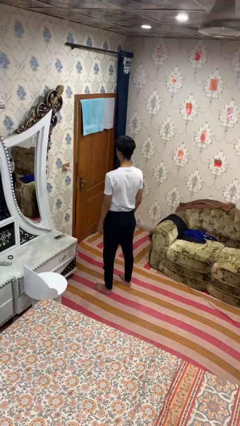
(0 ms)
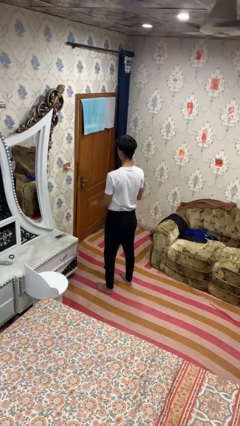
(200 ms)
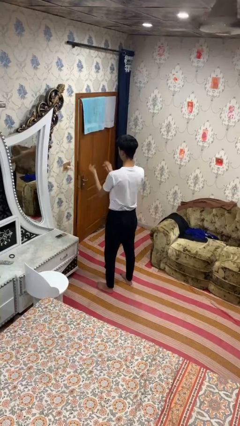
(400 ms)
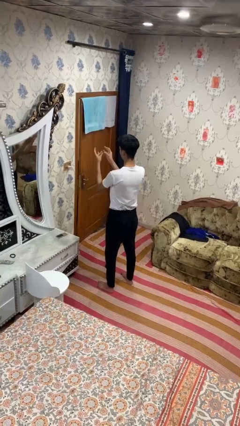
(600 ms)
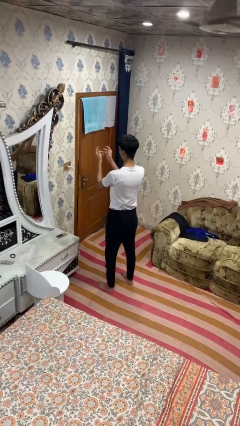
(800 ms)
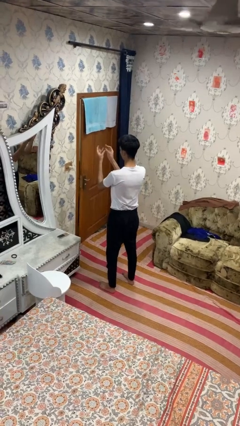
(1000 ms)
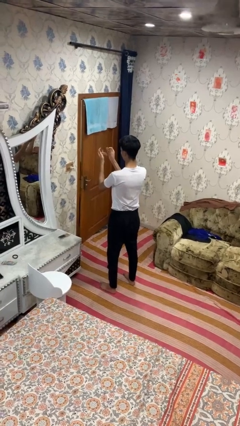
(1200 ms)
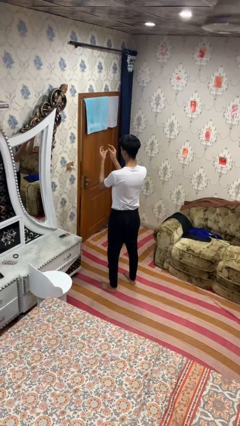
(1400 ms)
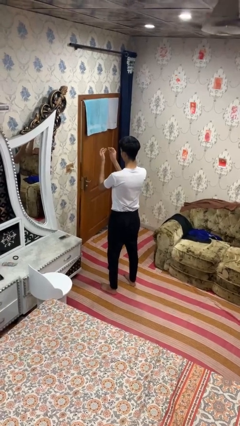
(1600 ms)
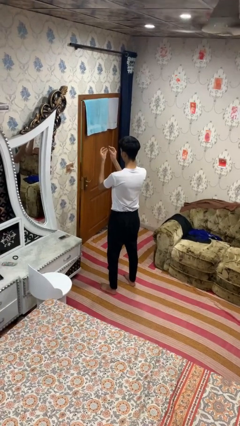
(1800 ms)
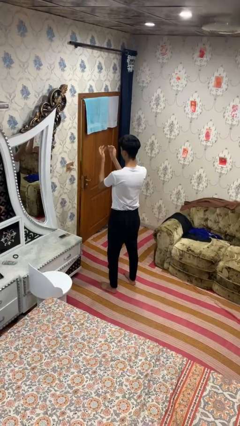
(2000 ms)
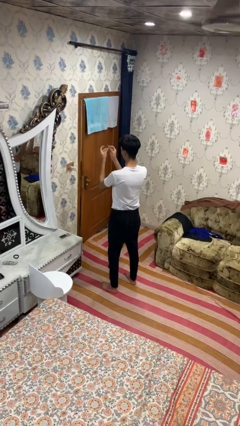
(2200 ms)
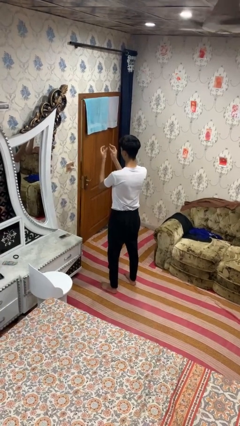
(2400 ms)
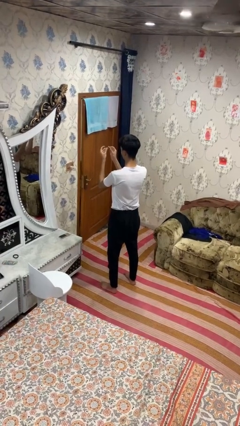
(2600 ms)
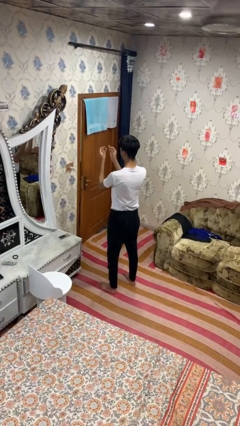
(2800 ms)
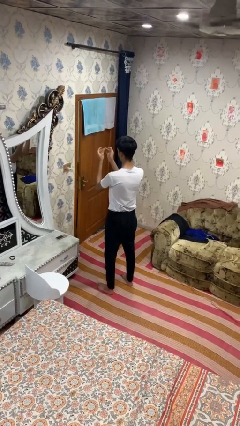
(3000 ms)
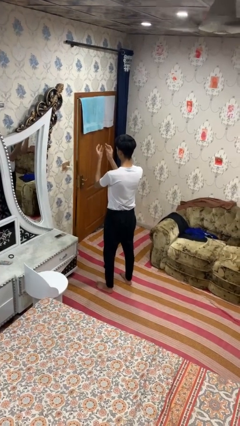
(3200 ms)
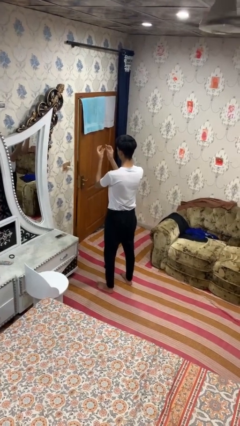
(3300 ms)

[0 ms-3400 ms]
person snaps fingers

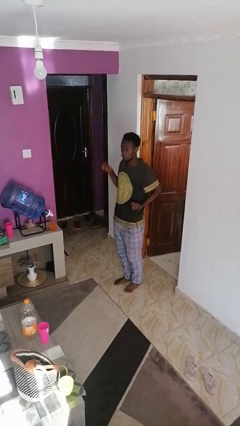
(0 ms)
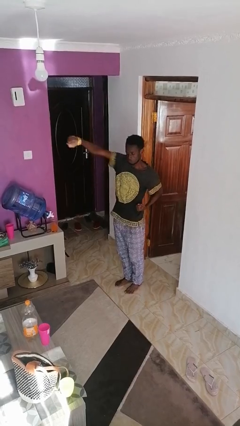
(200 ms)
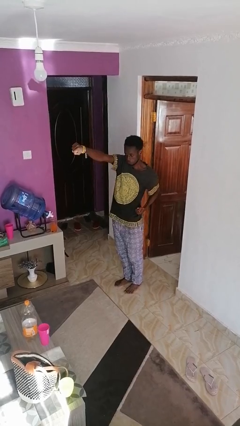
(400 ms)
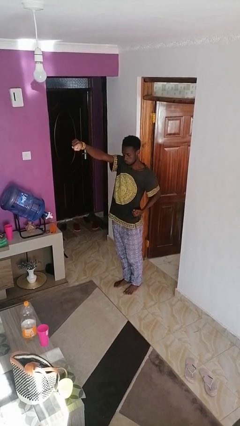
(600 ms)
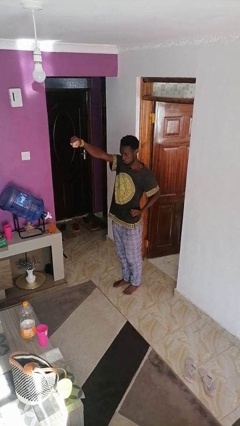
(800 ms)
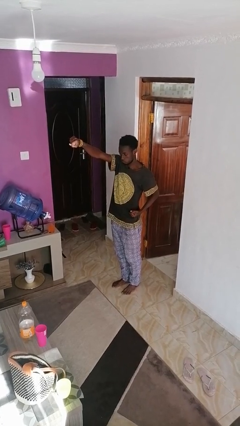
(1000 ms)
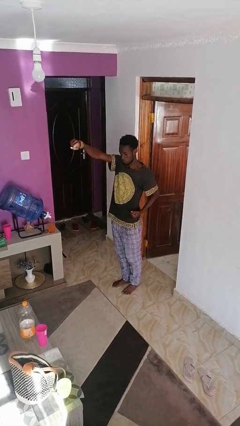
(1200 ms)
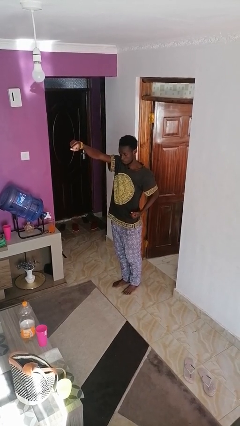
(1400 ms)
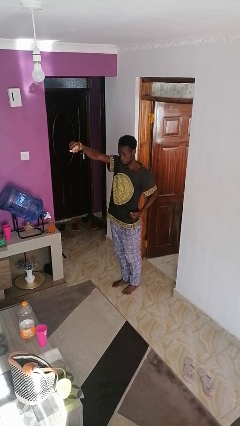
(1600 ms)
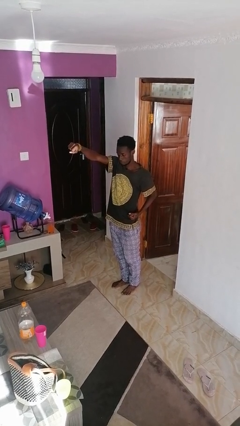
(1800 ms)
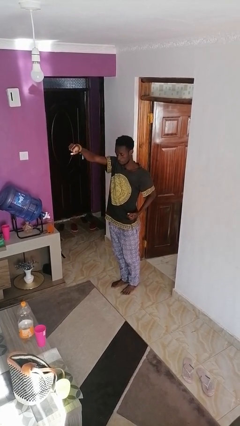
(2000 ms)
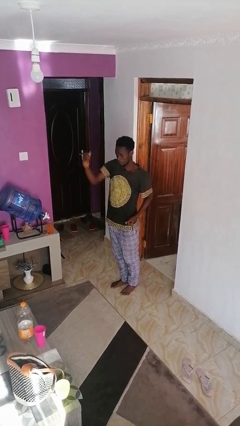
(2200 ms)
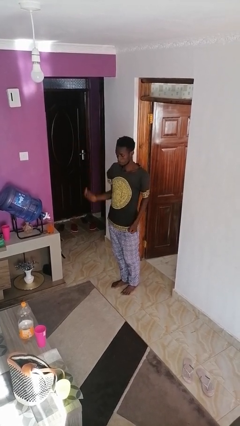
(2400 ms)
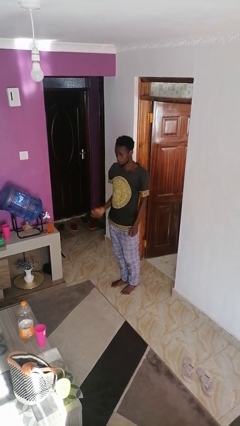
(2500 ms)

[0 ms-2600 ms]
person punches

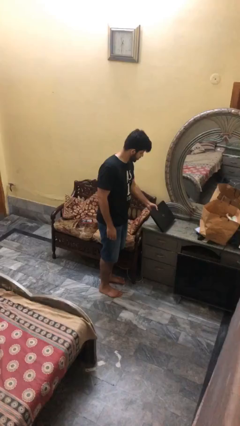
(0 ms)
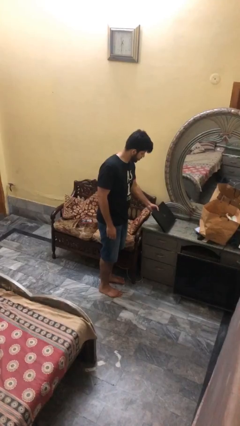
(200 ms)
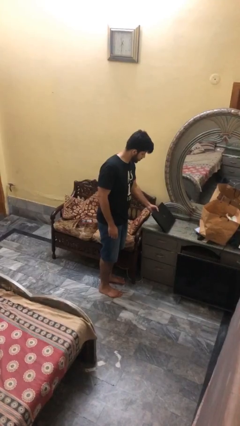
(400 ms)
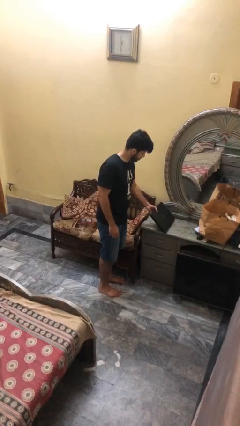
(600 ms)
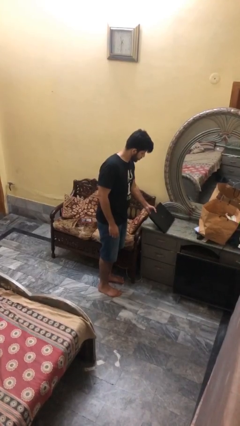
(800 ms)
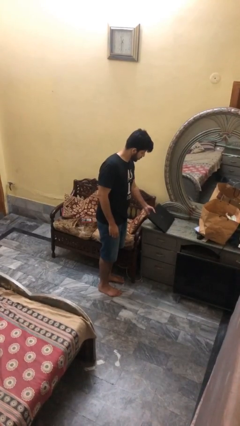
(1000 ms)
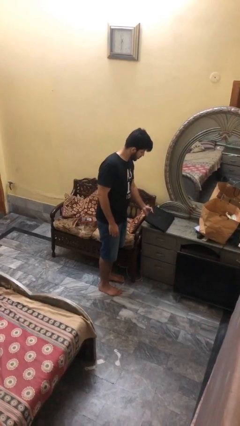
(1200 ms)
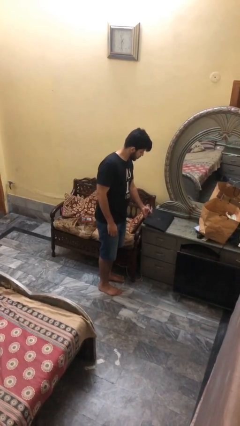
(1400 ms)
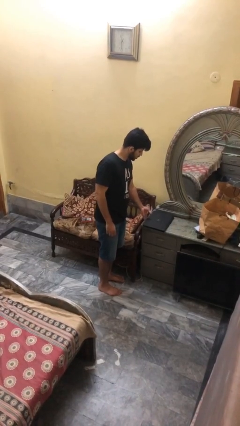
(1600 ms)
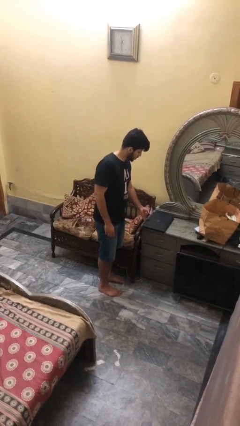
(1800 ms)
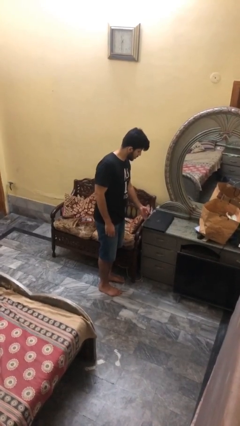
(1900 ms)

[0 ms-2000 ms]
person puts down object on countertop

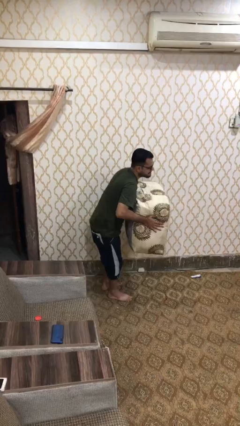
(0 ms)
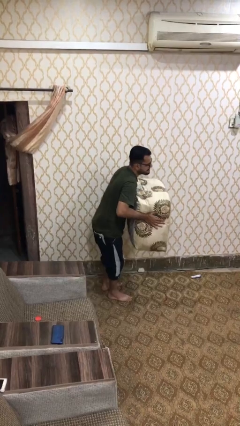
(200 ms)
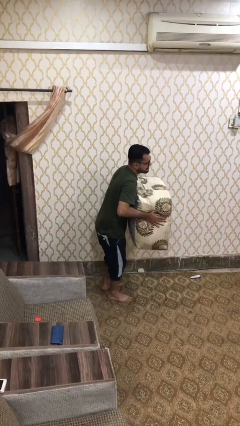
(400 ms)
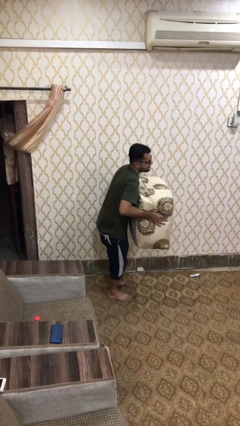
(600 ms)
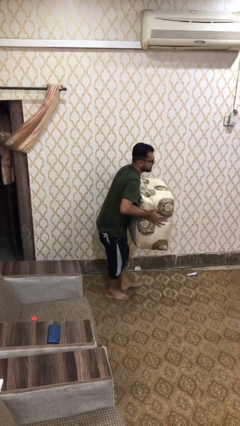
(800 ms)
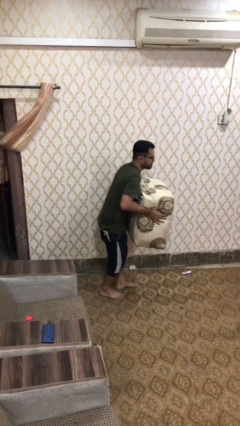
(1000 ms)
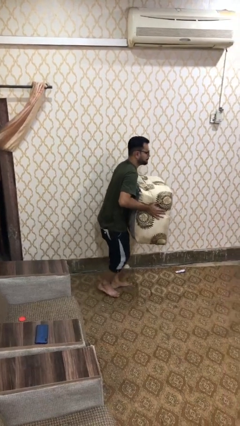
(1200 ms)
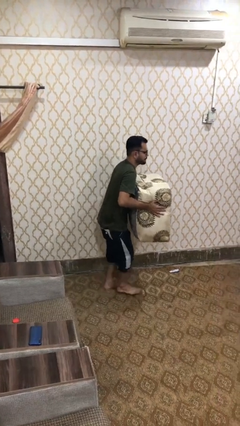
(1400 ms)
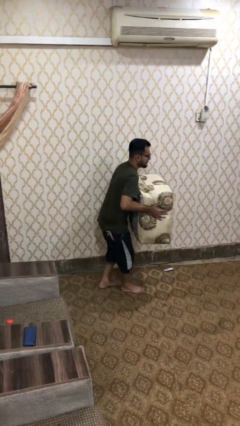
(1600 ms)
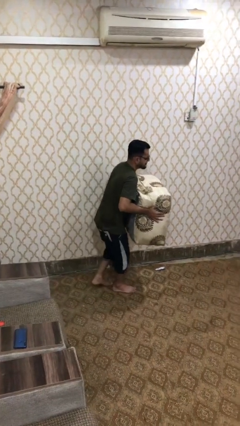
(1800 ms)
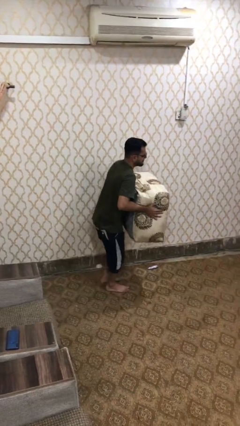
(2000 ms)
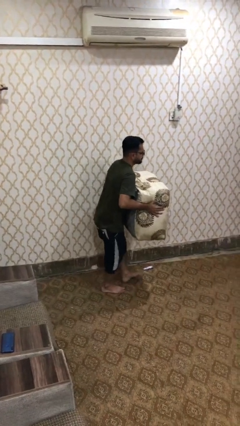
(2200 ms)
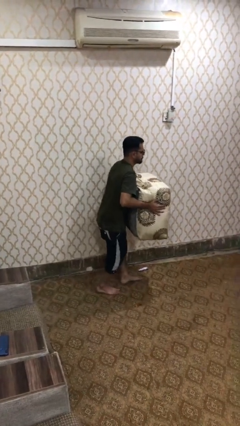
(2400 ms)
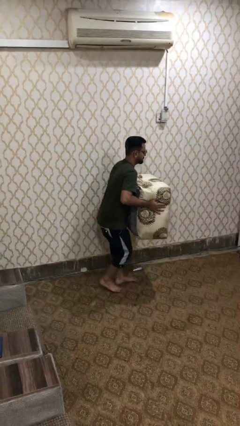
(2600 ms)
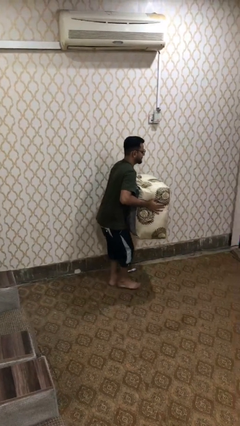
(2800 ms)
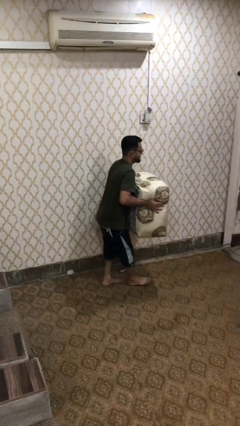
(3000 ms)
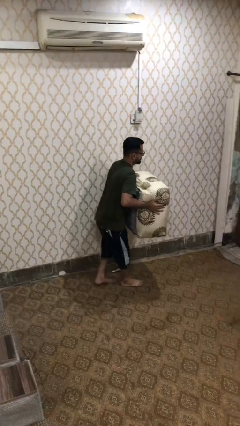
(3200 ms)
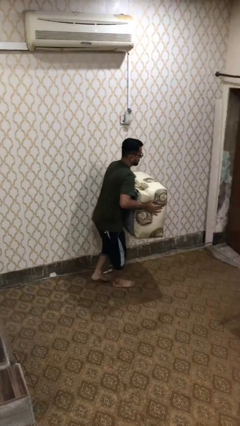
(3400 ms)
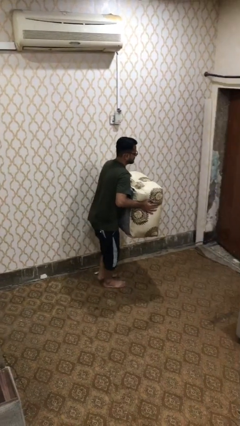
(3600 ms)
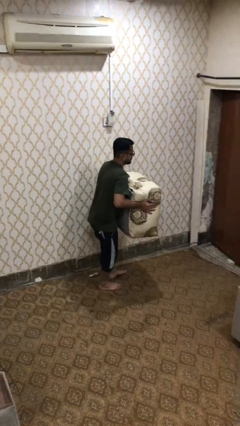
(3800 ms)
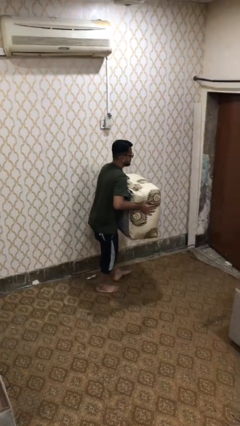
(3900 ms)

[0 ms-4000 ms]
person carries heavy object

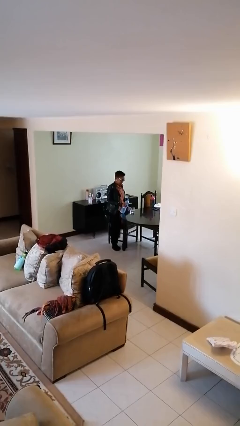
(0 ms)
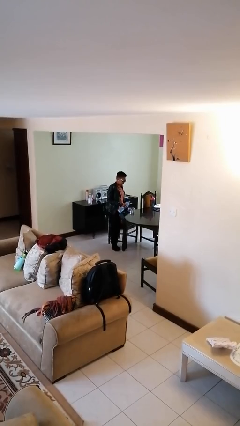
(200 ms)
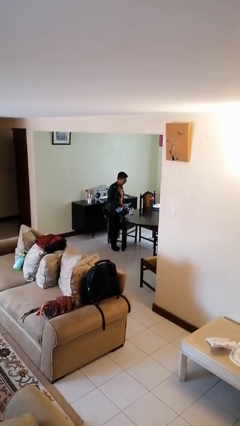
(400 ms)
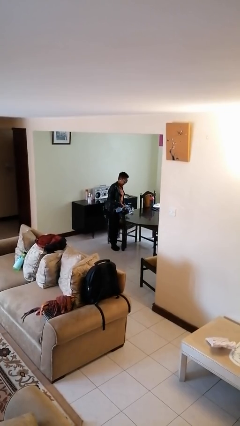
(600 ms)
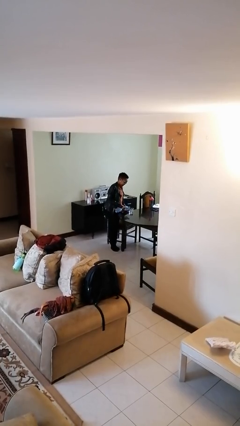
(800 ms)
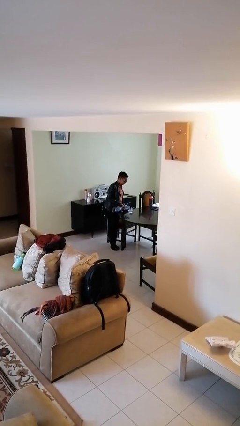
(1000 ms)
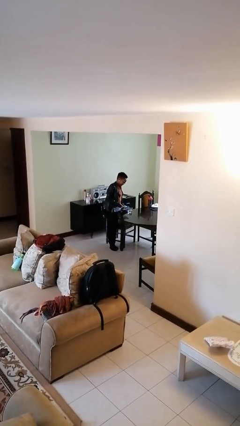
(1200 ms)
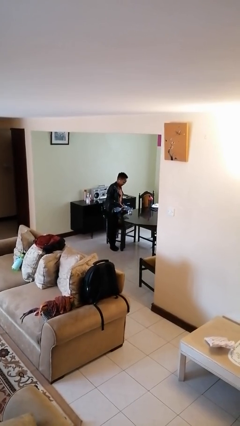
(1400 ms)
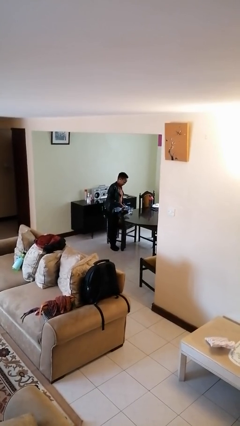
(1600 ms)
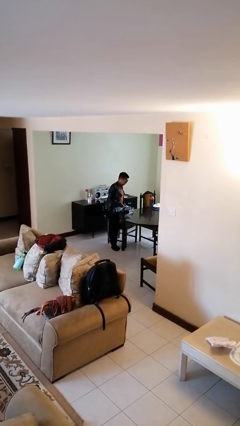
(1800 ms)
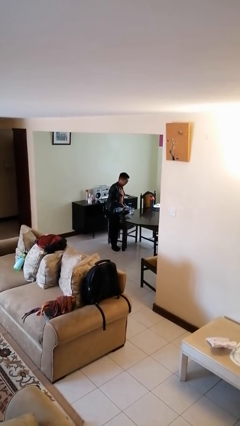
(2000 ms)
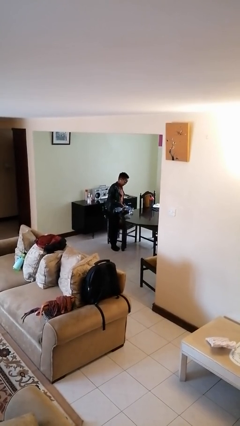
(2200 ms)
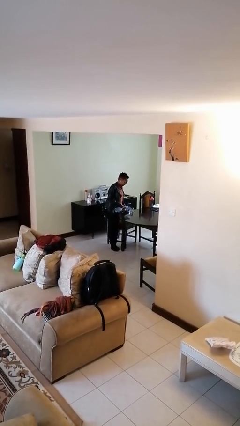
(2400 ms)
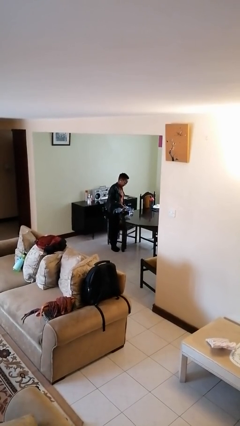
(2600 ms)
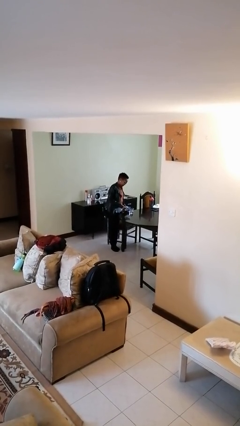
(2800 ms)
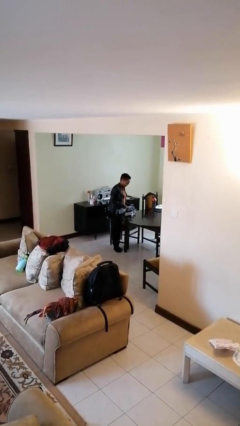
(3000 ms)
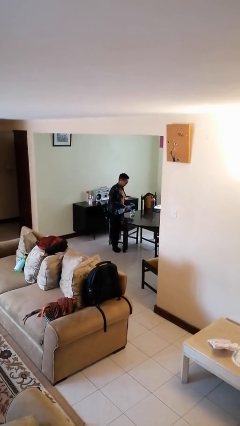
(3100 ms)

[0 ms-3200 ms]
person pours liquid into cup

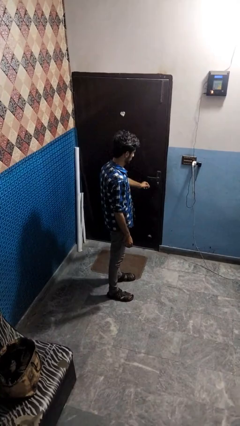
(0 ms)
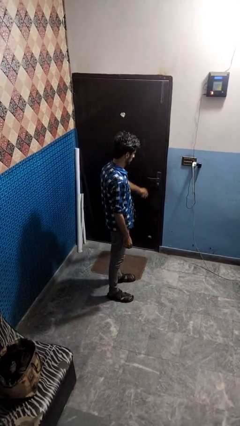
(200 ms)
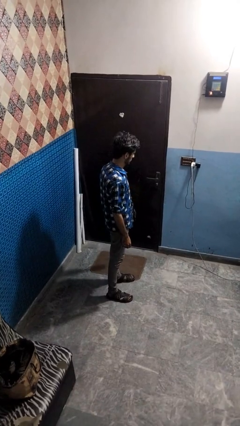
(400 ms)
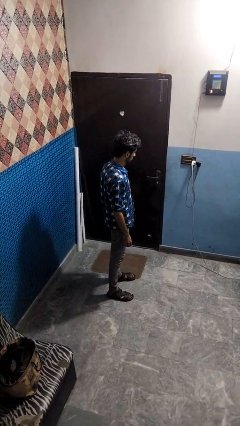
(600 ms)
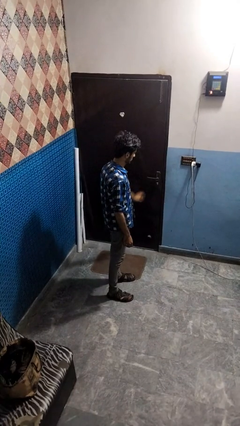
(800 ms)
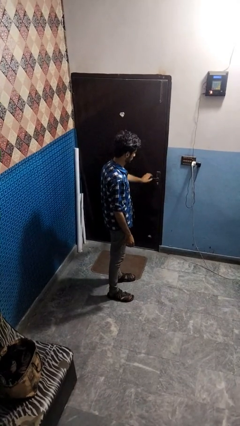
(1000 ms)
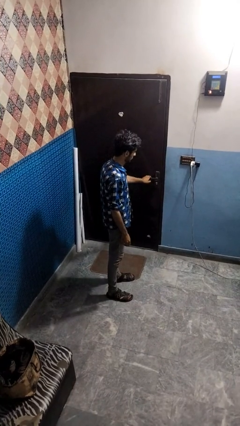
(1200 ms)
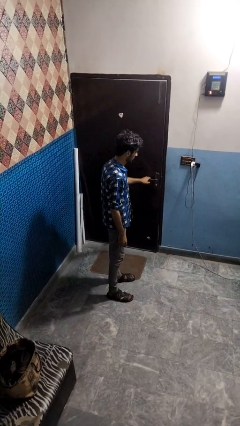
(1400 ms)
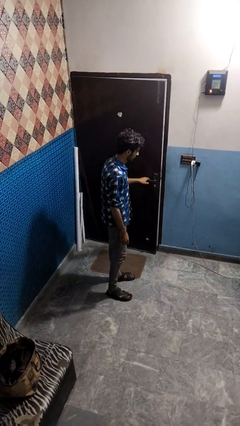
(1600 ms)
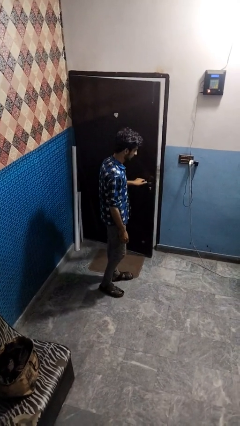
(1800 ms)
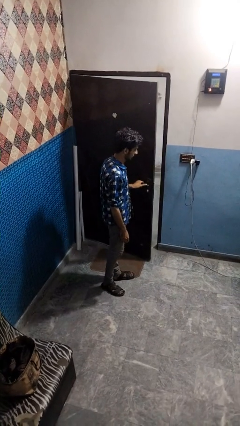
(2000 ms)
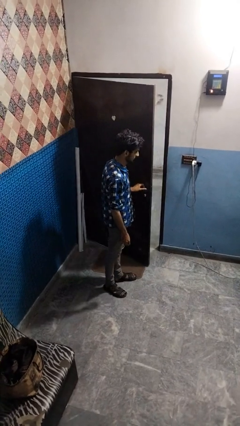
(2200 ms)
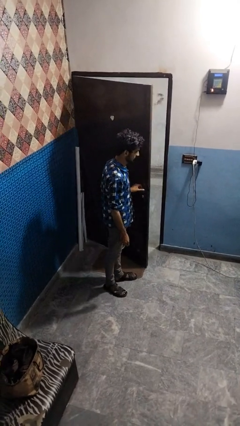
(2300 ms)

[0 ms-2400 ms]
person opens facility door
